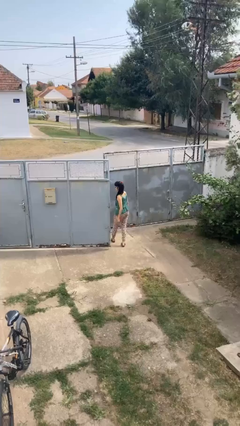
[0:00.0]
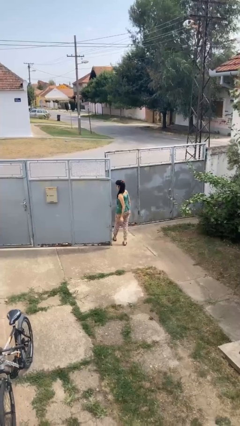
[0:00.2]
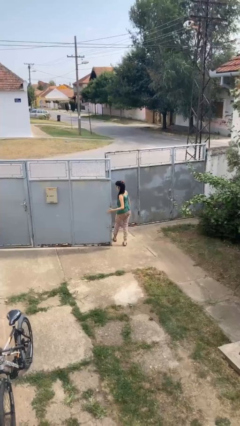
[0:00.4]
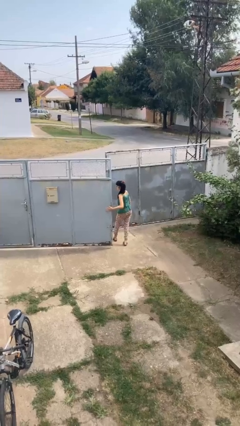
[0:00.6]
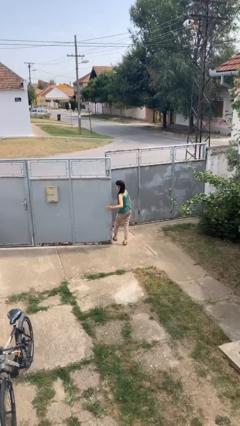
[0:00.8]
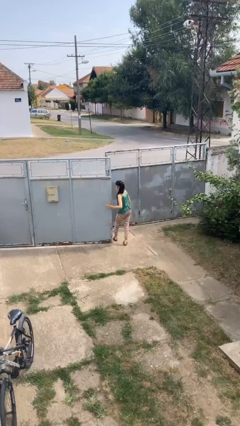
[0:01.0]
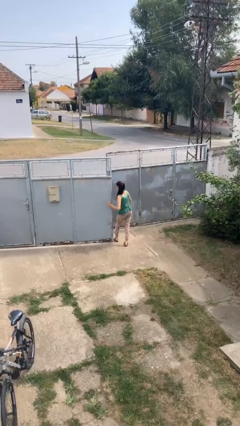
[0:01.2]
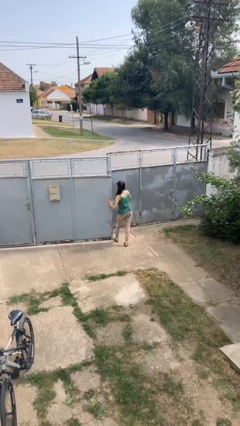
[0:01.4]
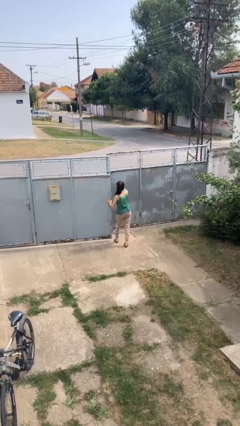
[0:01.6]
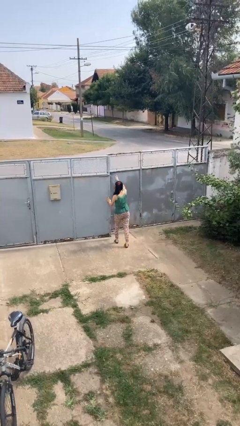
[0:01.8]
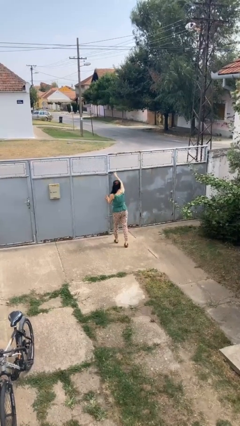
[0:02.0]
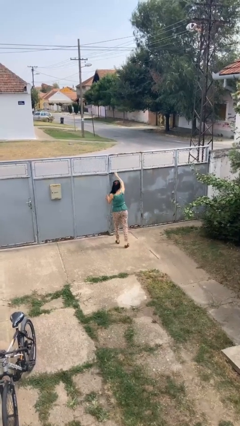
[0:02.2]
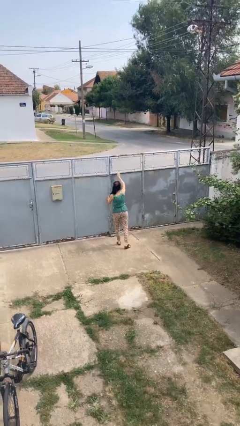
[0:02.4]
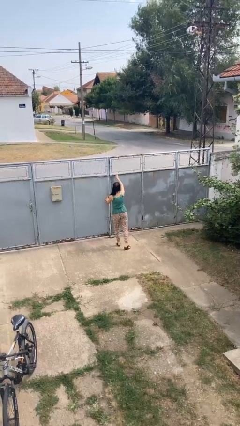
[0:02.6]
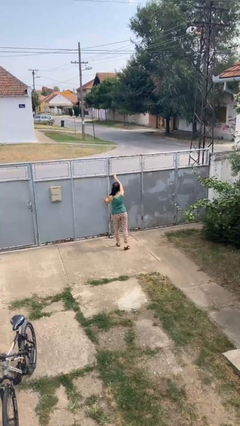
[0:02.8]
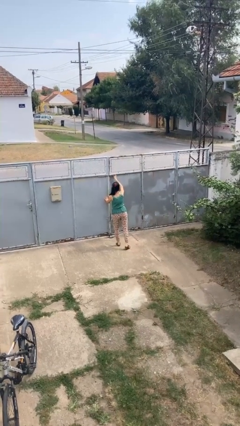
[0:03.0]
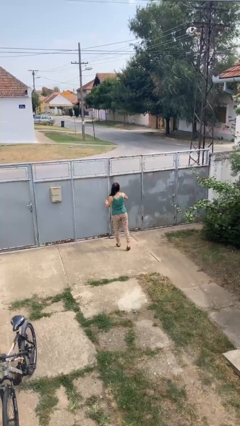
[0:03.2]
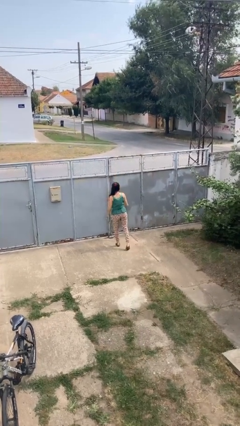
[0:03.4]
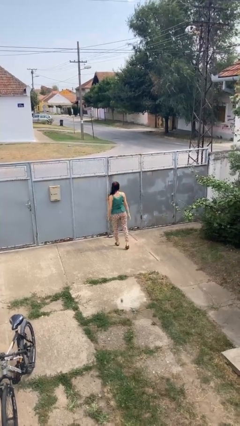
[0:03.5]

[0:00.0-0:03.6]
person closes gate

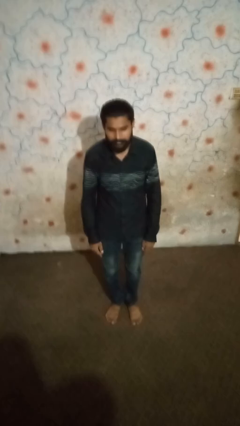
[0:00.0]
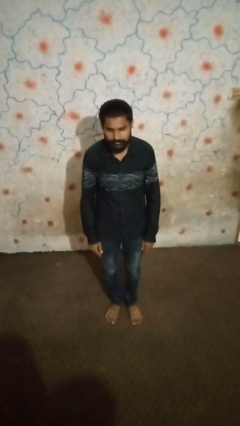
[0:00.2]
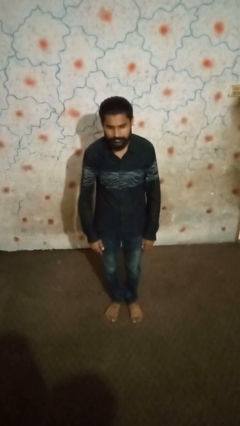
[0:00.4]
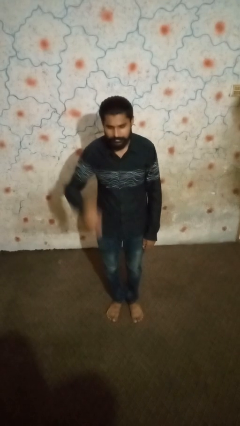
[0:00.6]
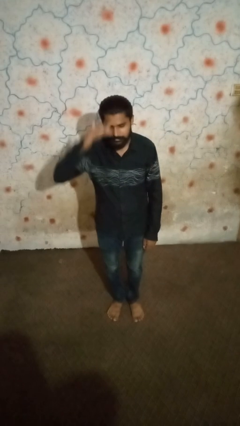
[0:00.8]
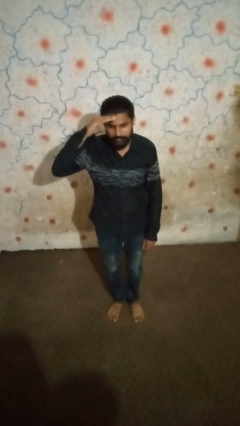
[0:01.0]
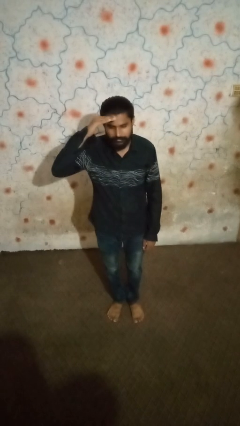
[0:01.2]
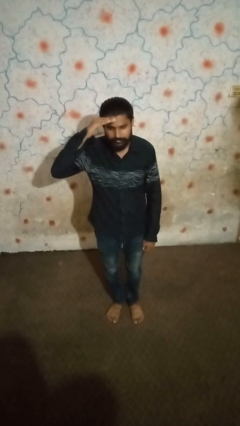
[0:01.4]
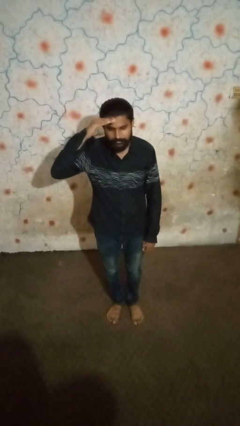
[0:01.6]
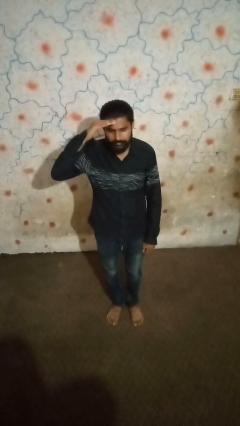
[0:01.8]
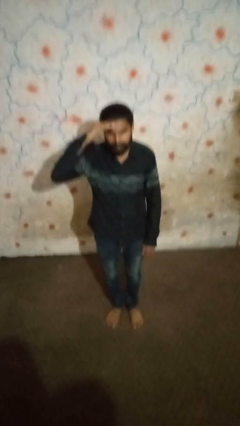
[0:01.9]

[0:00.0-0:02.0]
person salutes

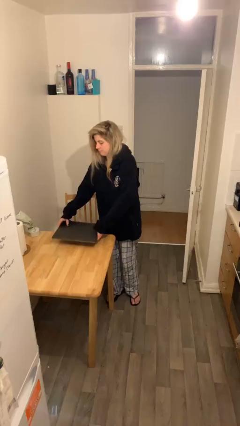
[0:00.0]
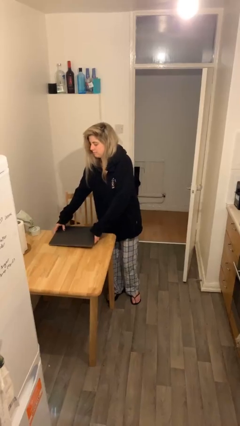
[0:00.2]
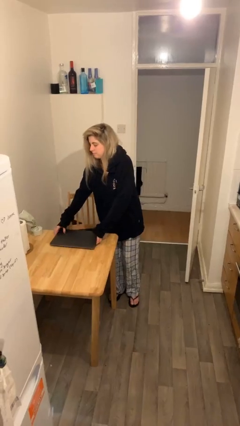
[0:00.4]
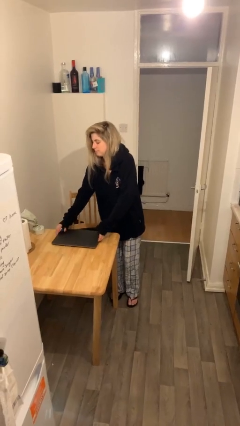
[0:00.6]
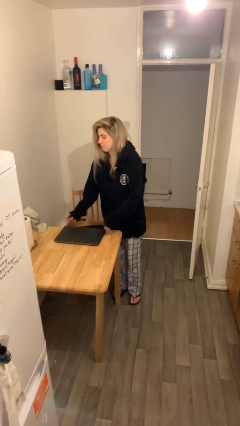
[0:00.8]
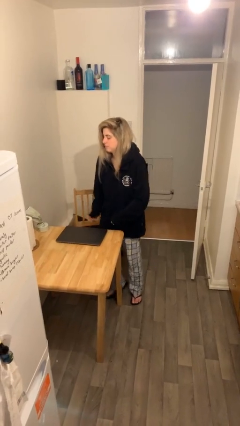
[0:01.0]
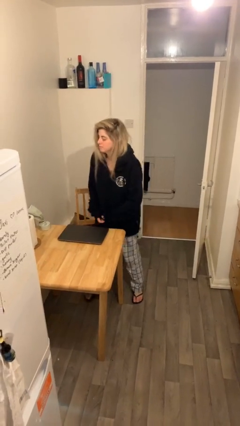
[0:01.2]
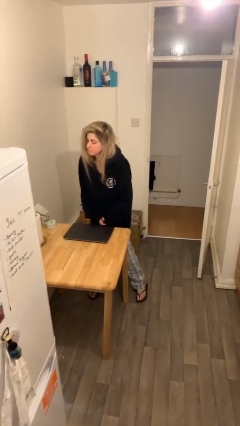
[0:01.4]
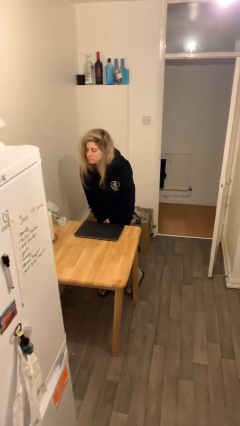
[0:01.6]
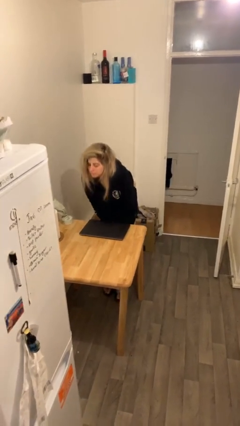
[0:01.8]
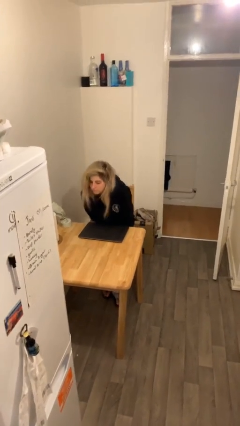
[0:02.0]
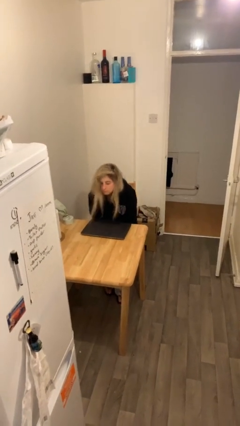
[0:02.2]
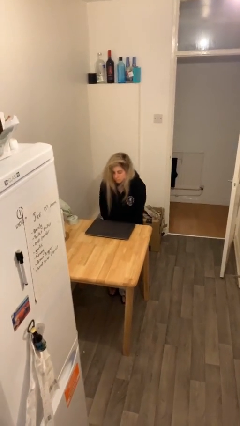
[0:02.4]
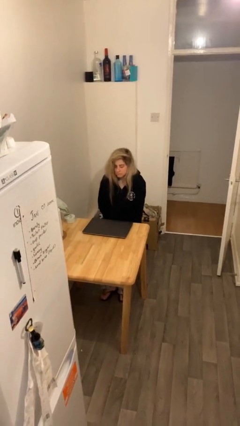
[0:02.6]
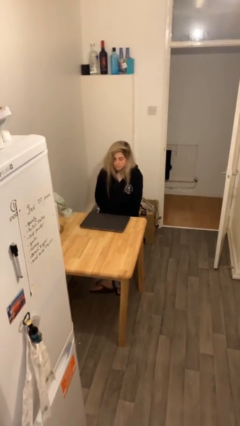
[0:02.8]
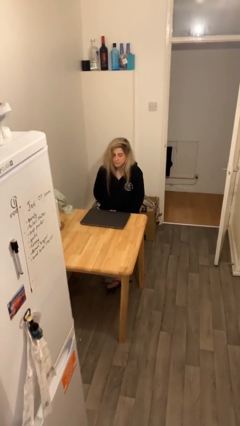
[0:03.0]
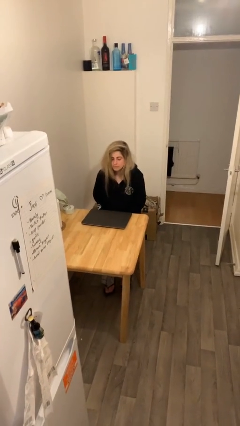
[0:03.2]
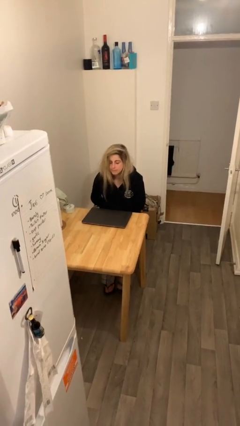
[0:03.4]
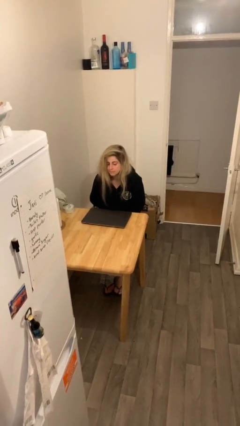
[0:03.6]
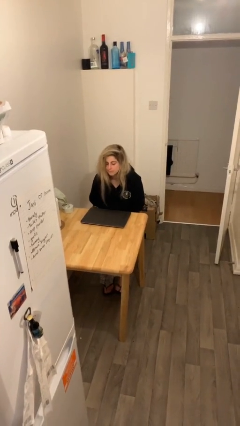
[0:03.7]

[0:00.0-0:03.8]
person sits down

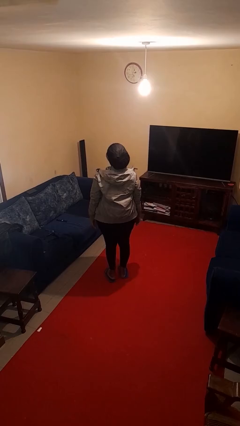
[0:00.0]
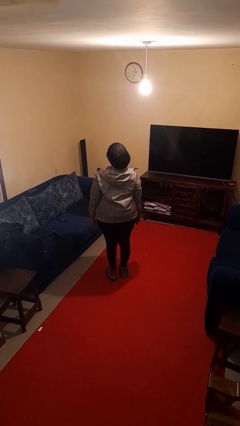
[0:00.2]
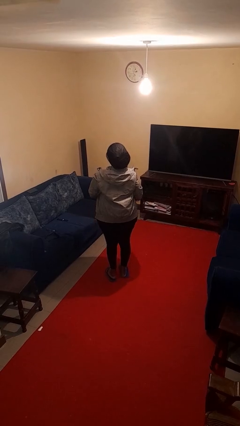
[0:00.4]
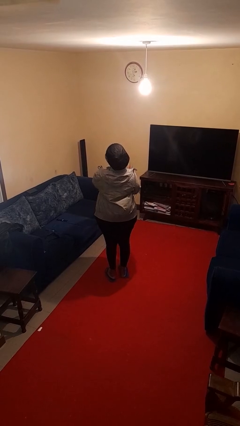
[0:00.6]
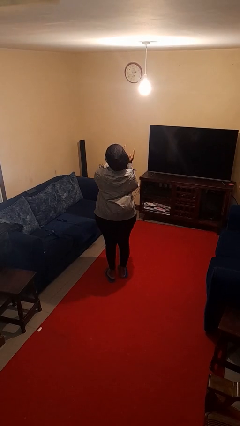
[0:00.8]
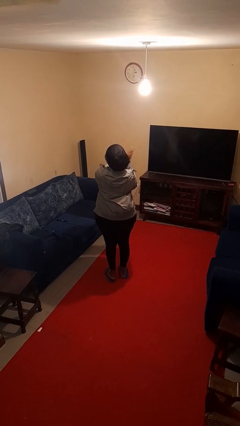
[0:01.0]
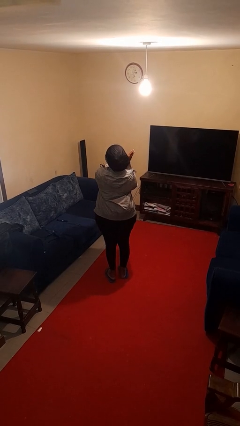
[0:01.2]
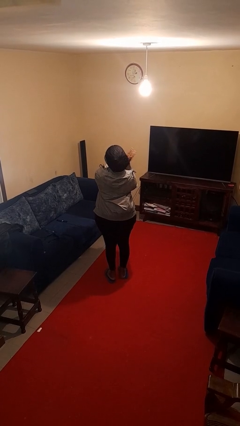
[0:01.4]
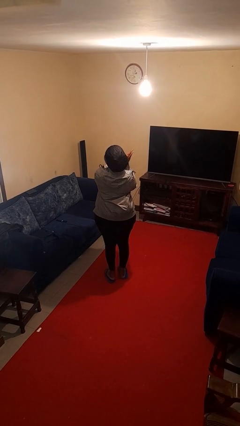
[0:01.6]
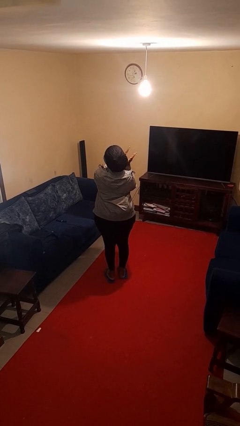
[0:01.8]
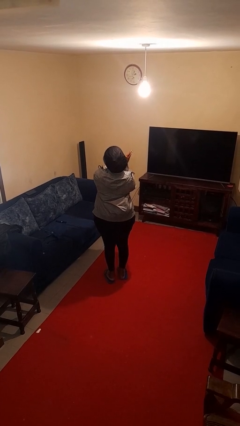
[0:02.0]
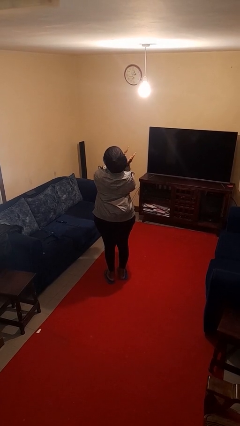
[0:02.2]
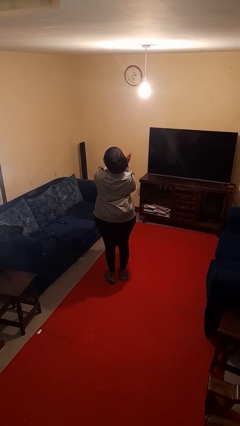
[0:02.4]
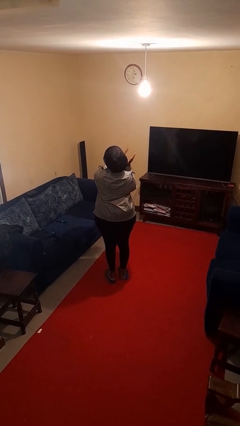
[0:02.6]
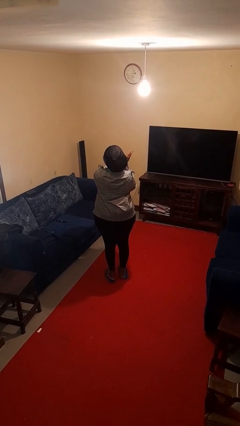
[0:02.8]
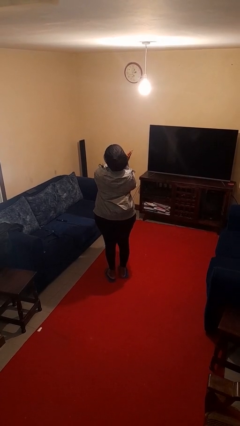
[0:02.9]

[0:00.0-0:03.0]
person claps hands

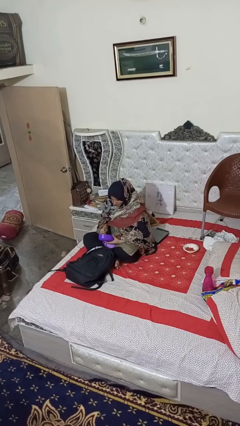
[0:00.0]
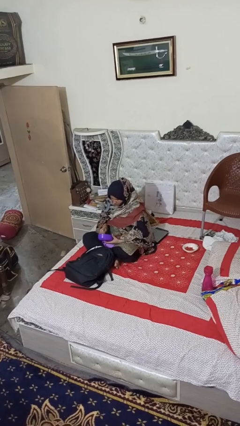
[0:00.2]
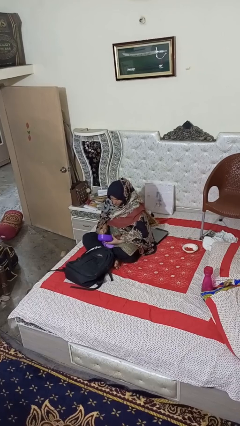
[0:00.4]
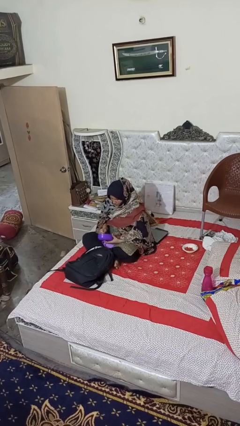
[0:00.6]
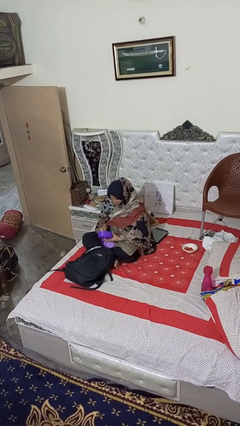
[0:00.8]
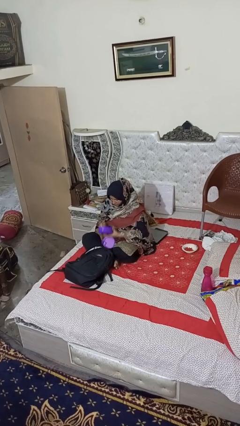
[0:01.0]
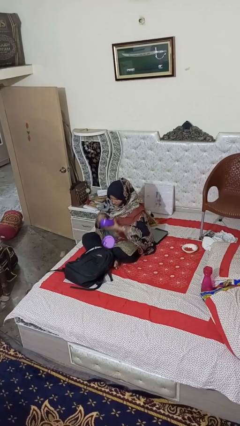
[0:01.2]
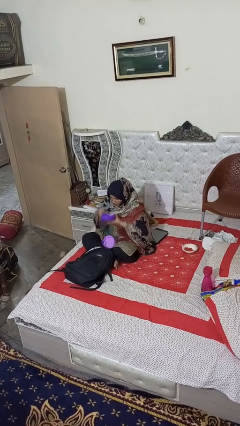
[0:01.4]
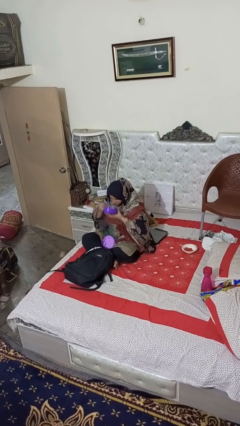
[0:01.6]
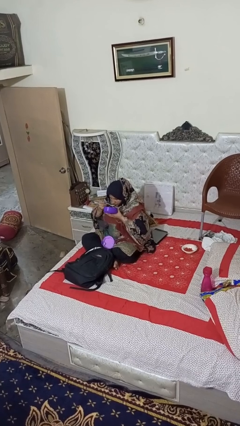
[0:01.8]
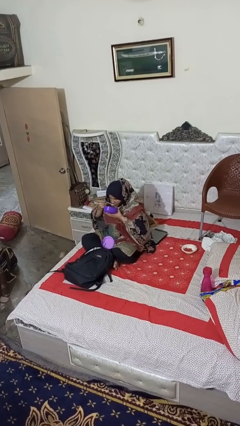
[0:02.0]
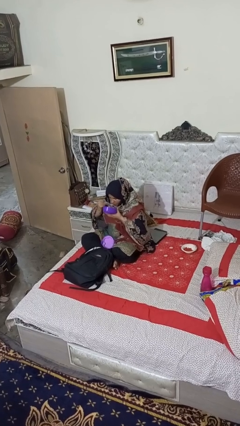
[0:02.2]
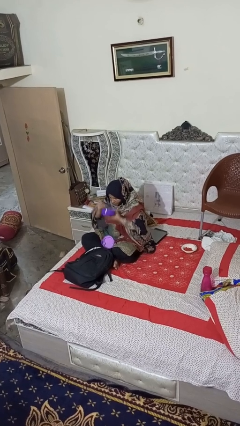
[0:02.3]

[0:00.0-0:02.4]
person eats snack from bag

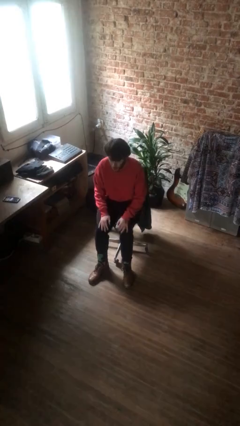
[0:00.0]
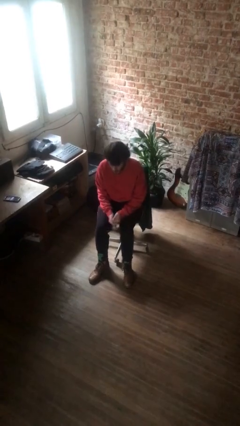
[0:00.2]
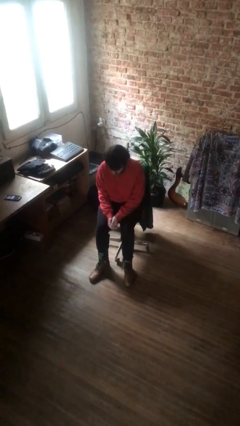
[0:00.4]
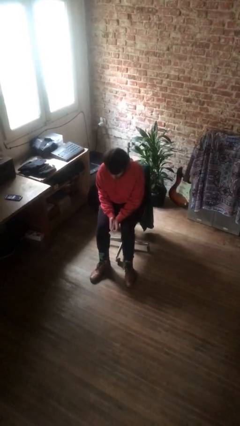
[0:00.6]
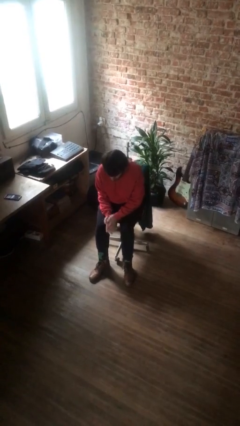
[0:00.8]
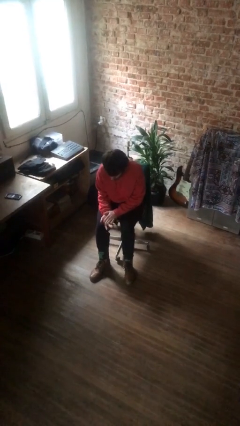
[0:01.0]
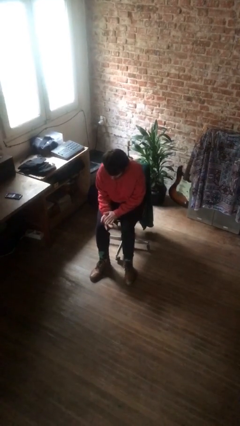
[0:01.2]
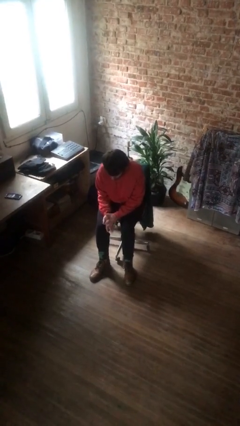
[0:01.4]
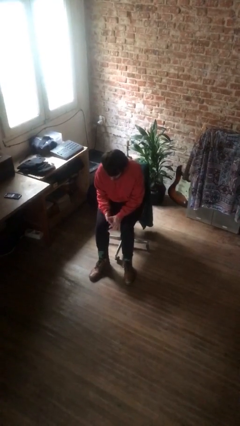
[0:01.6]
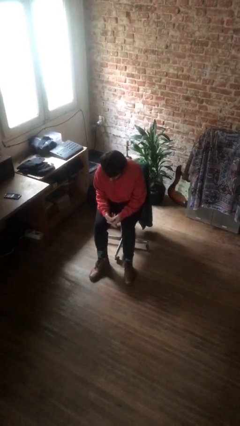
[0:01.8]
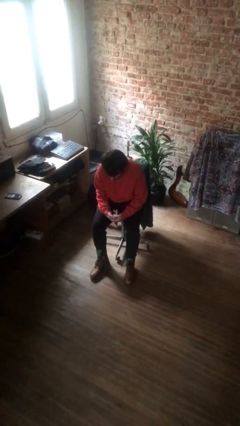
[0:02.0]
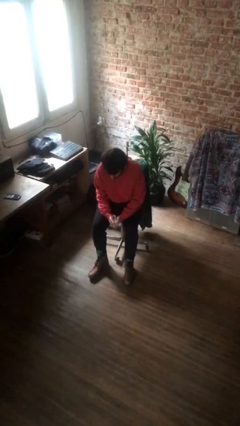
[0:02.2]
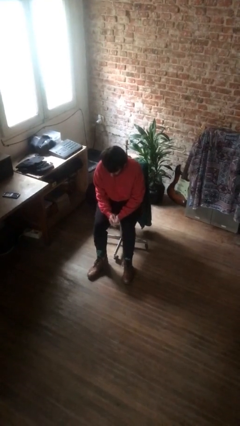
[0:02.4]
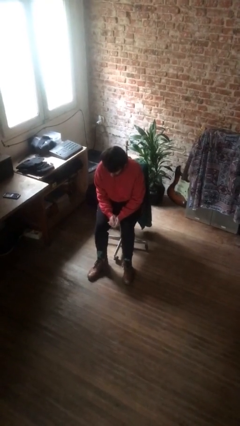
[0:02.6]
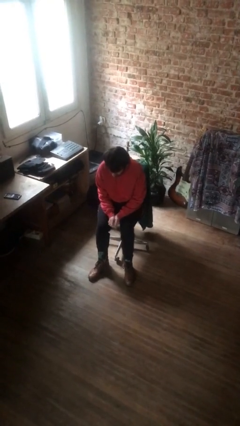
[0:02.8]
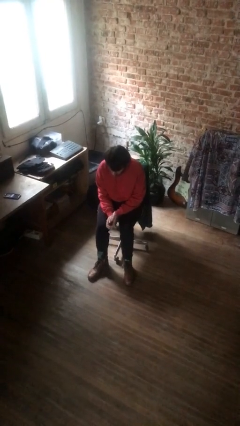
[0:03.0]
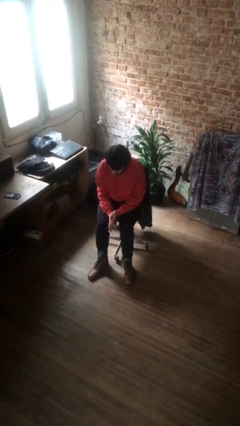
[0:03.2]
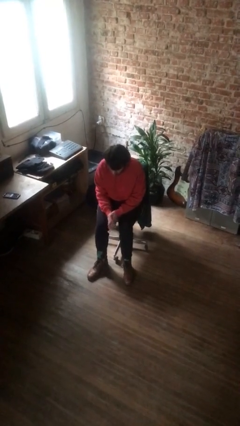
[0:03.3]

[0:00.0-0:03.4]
person looks at hands in lap
